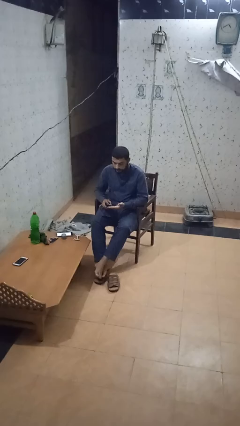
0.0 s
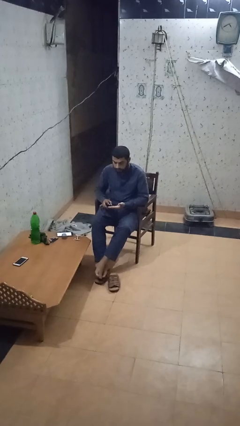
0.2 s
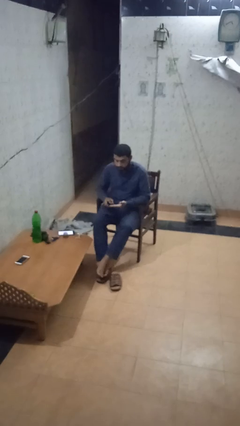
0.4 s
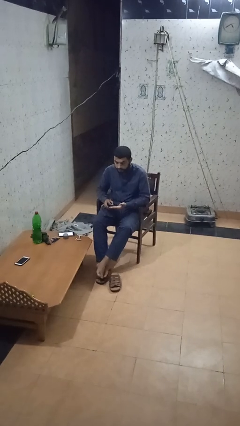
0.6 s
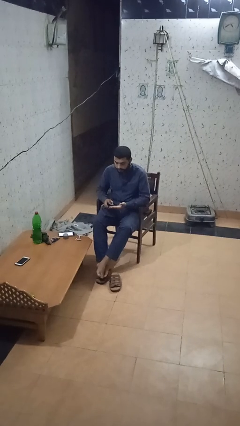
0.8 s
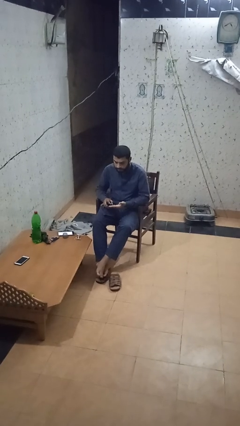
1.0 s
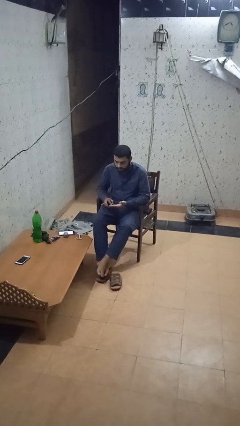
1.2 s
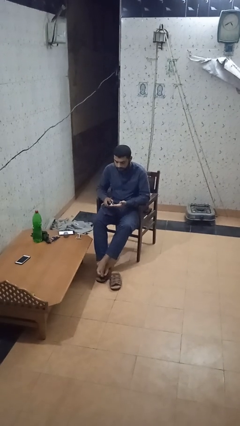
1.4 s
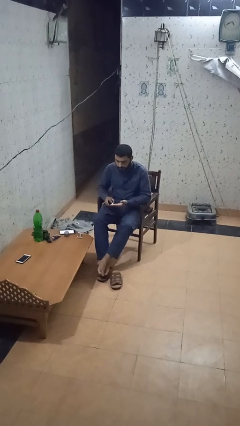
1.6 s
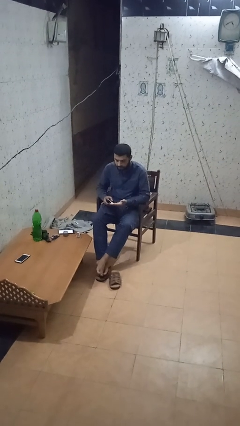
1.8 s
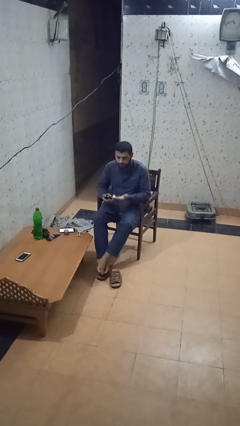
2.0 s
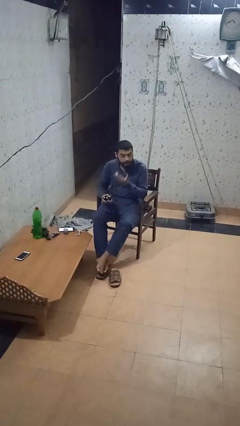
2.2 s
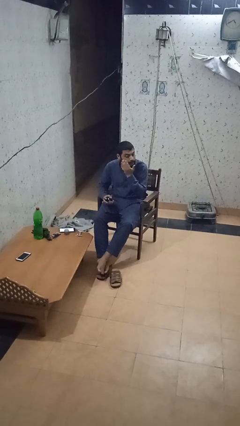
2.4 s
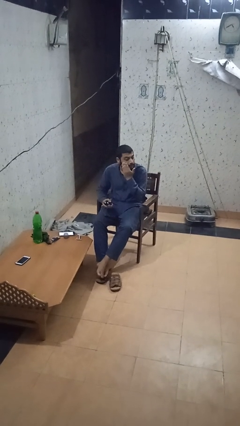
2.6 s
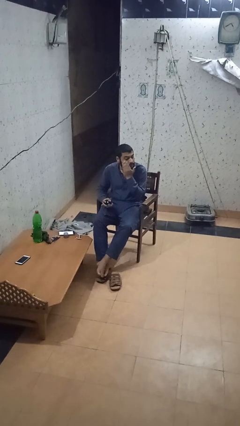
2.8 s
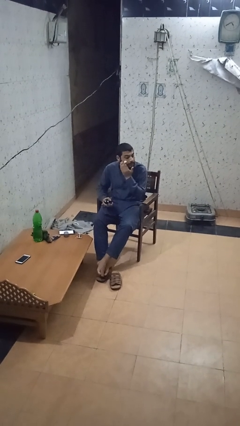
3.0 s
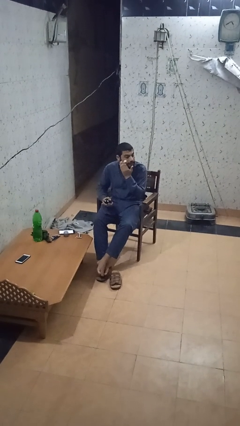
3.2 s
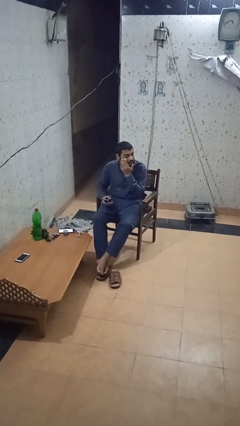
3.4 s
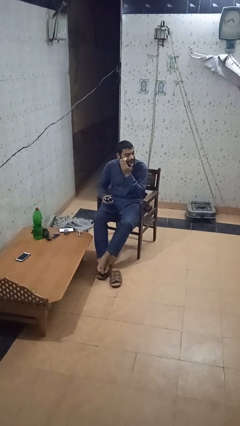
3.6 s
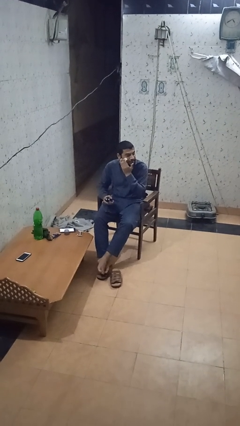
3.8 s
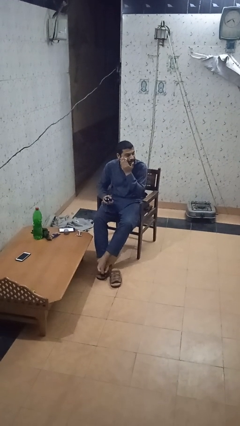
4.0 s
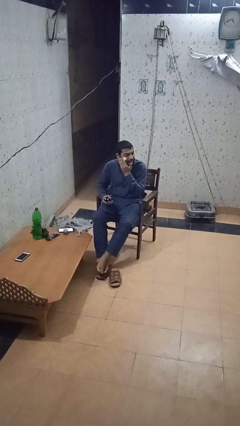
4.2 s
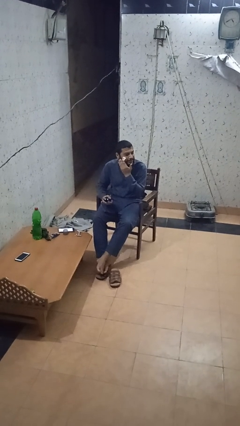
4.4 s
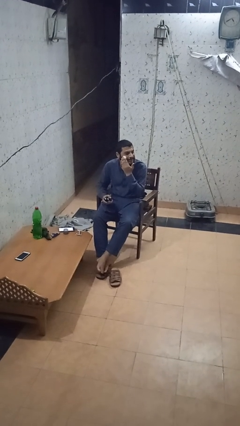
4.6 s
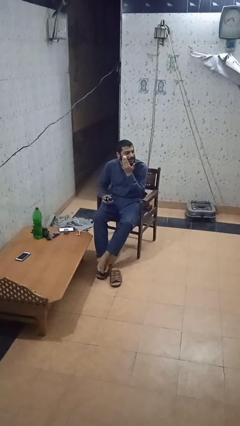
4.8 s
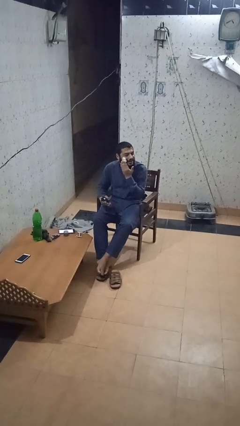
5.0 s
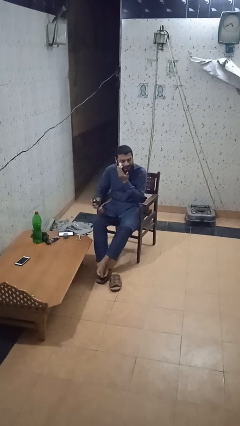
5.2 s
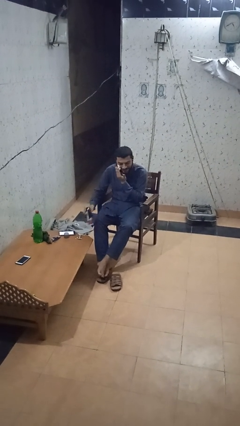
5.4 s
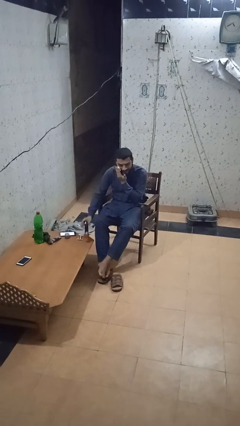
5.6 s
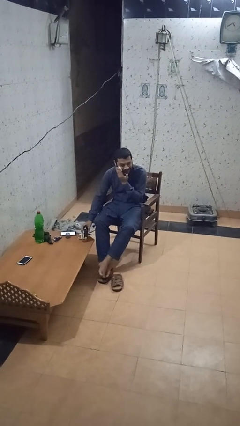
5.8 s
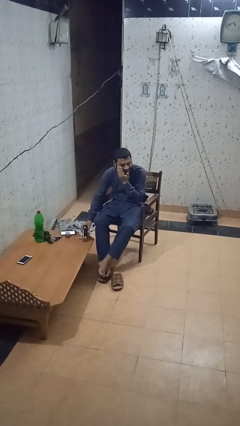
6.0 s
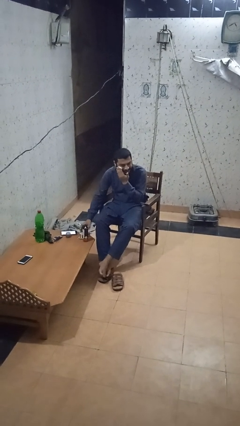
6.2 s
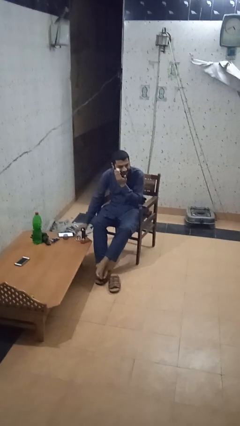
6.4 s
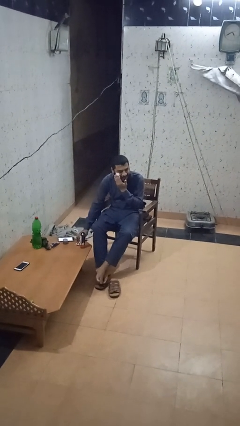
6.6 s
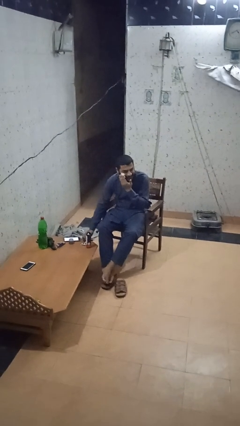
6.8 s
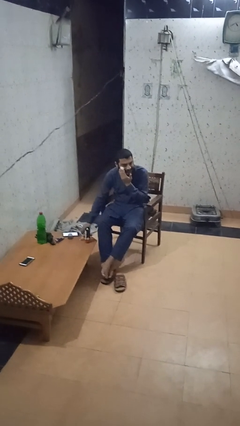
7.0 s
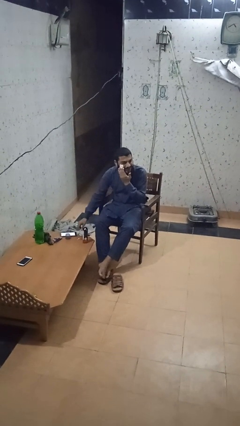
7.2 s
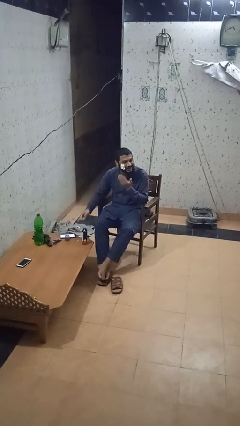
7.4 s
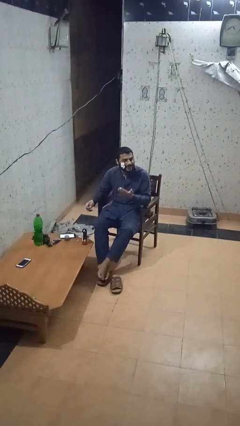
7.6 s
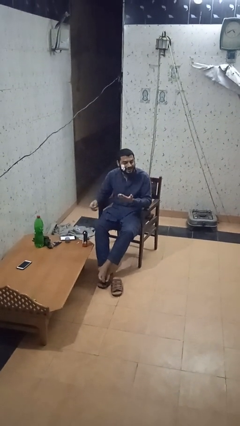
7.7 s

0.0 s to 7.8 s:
person applies shaving cream

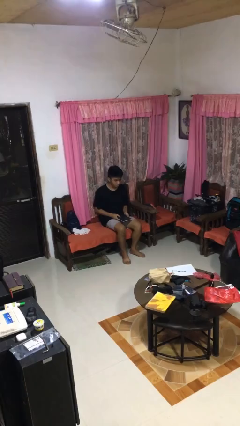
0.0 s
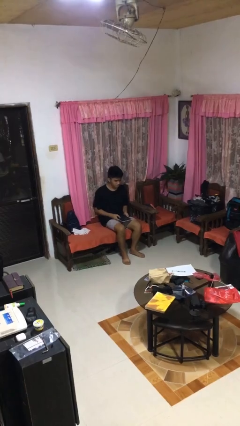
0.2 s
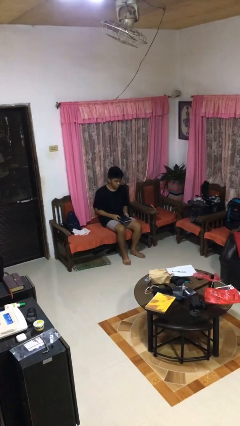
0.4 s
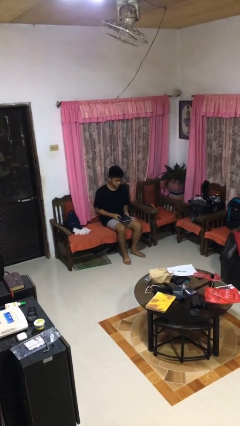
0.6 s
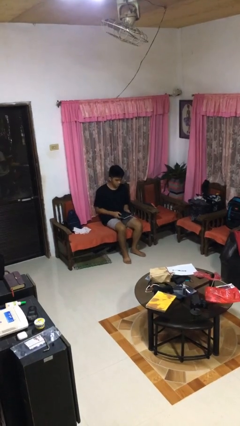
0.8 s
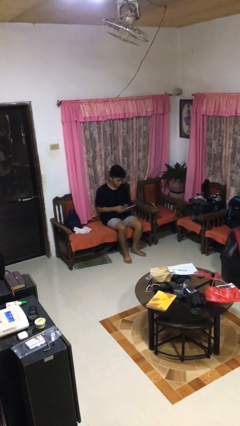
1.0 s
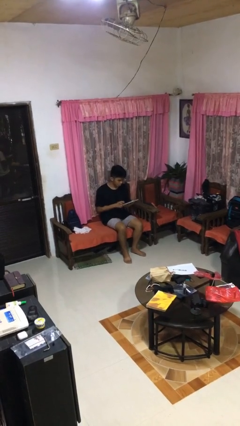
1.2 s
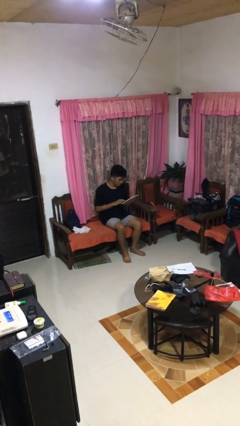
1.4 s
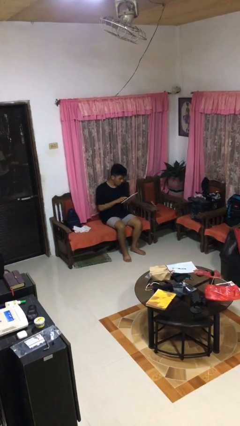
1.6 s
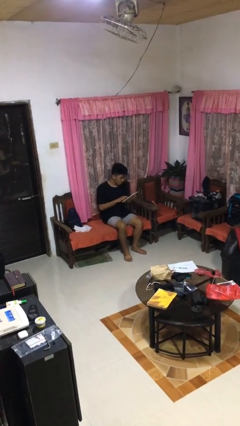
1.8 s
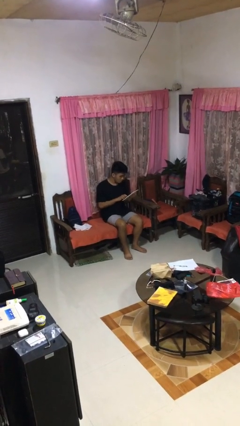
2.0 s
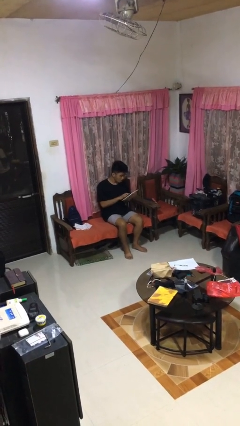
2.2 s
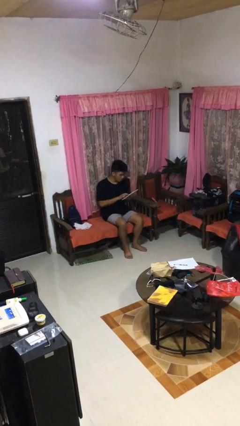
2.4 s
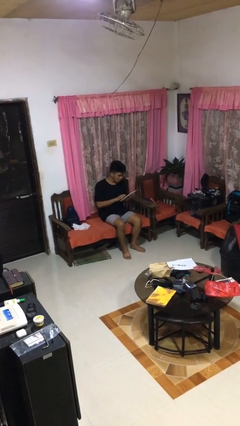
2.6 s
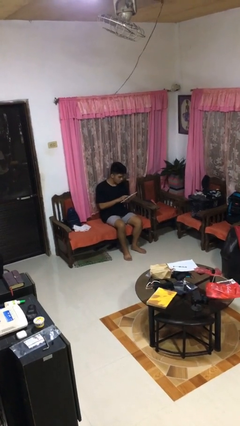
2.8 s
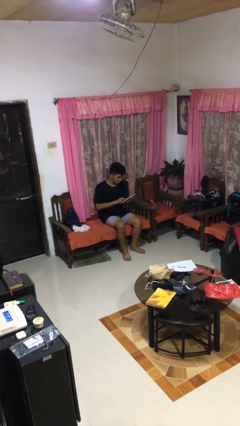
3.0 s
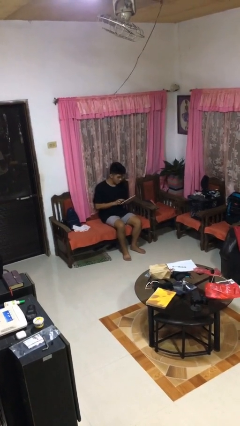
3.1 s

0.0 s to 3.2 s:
person interacts with tablet

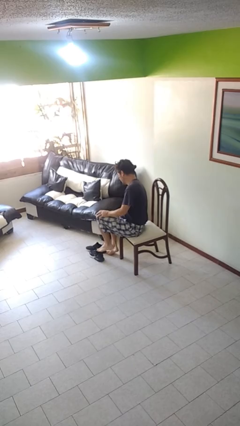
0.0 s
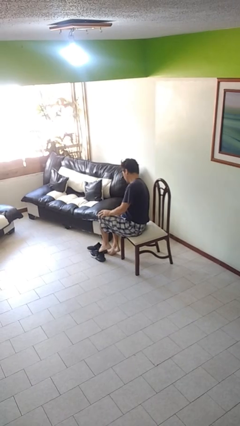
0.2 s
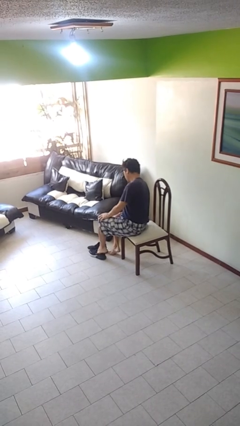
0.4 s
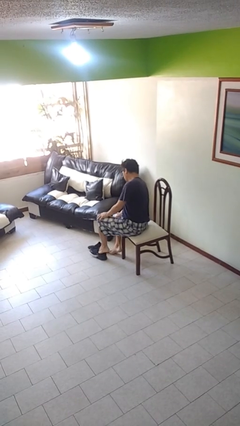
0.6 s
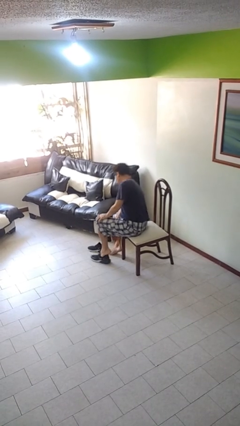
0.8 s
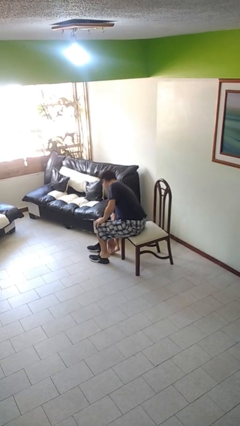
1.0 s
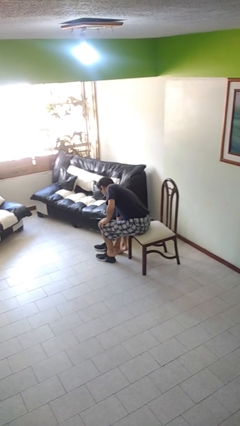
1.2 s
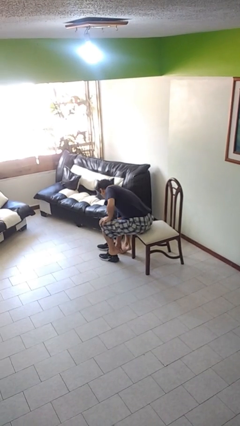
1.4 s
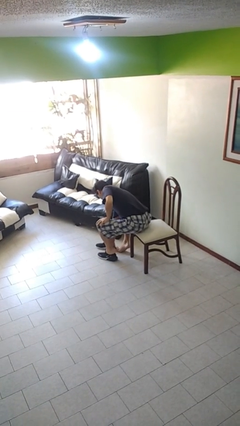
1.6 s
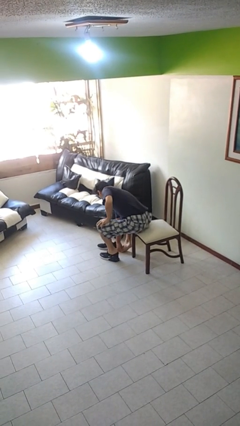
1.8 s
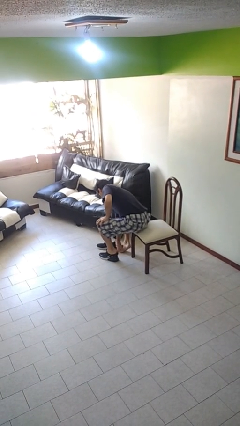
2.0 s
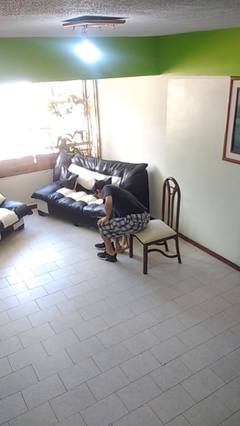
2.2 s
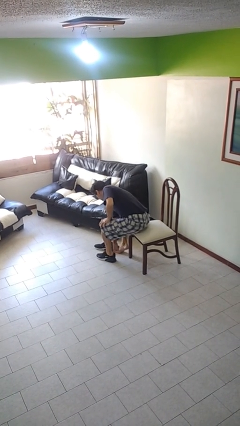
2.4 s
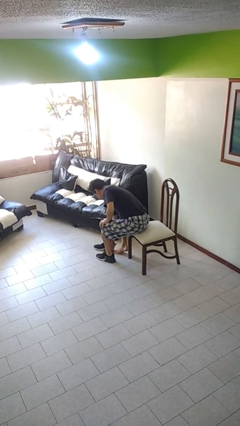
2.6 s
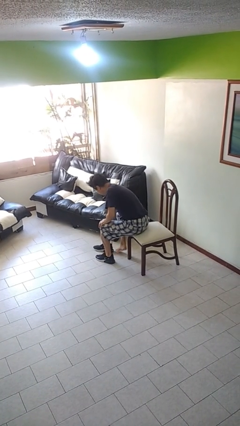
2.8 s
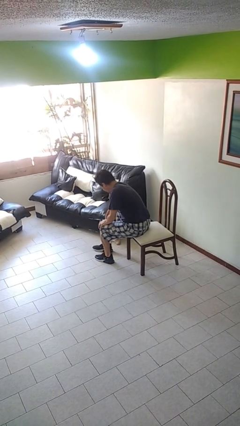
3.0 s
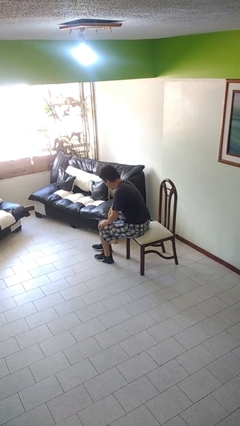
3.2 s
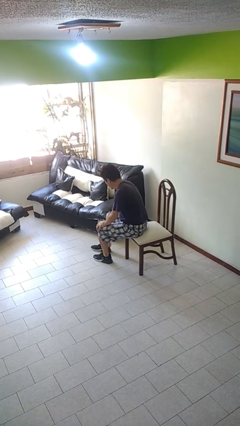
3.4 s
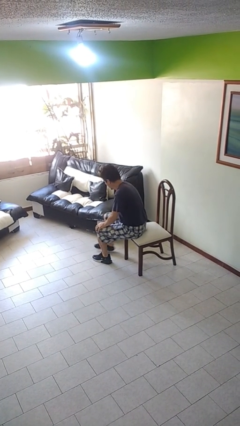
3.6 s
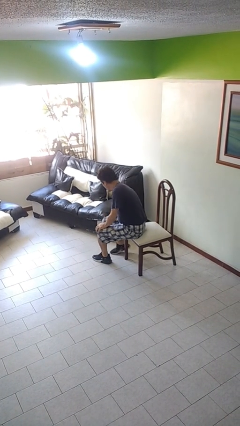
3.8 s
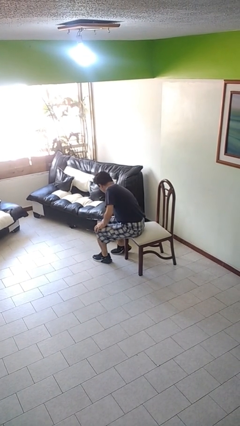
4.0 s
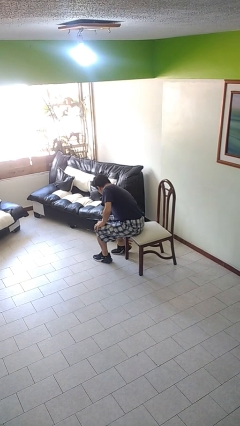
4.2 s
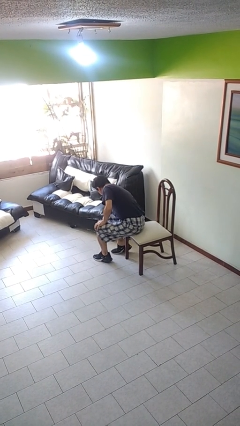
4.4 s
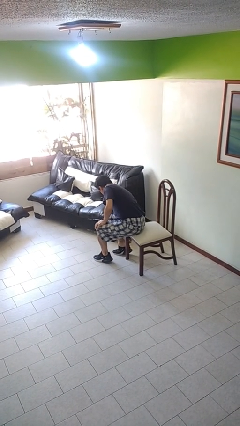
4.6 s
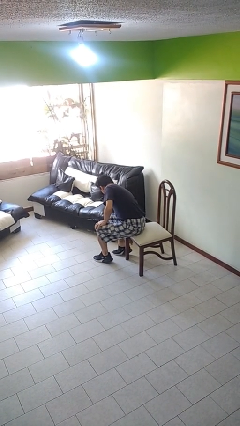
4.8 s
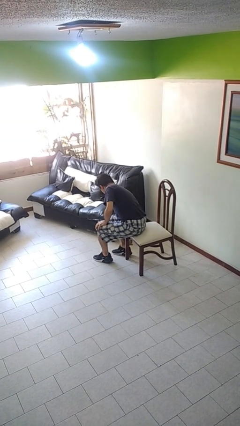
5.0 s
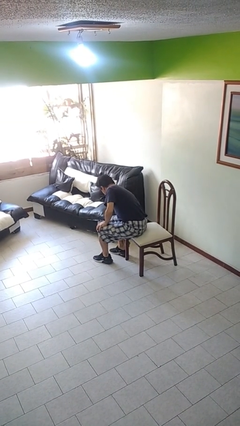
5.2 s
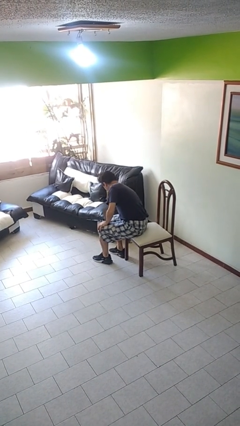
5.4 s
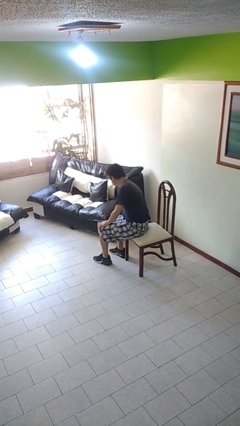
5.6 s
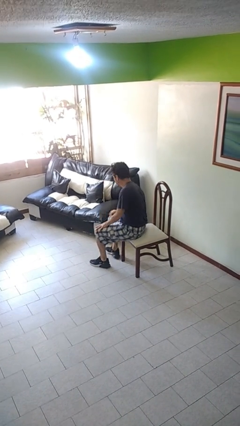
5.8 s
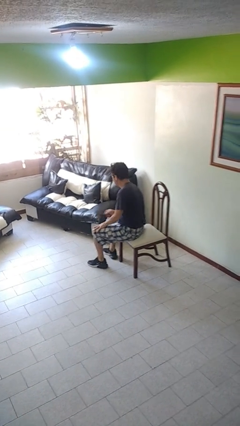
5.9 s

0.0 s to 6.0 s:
person puts on shoes

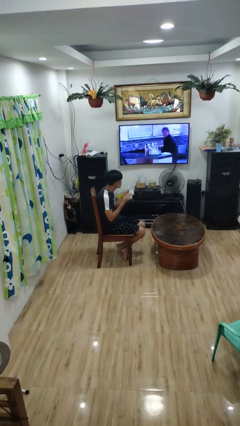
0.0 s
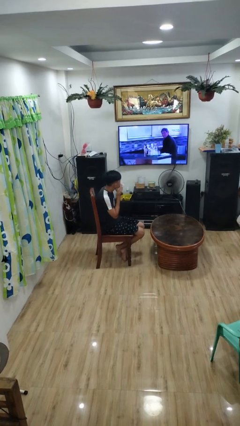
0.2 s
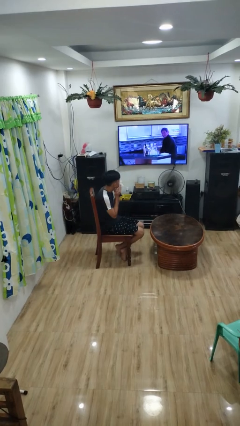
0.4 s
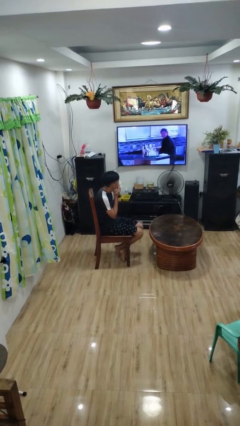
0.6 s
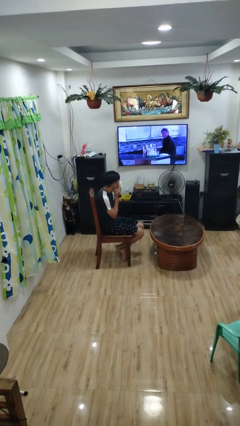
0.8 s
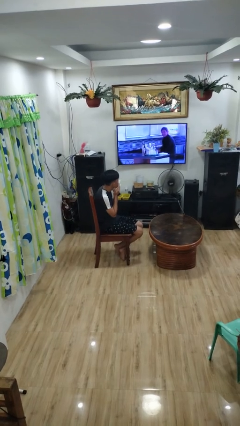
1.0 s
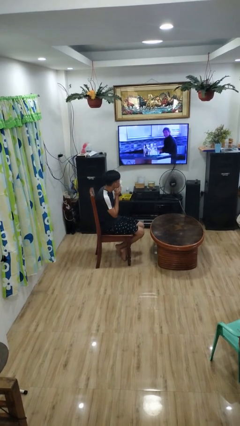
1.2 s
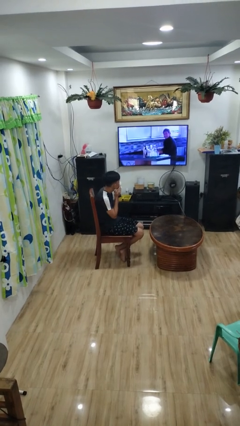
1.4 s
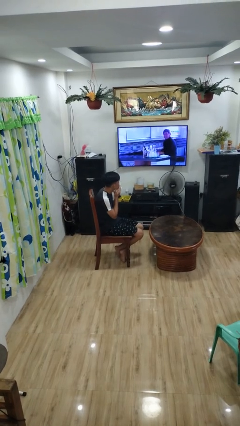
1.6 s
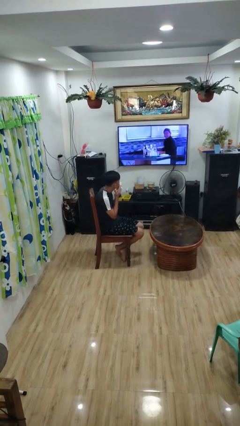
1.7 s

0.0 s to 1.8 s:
person wipes mouth with napkin
